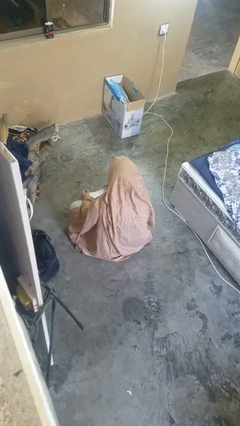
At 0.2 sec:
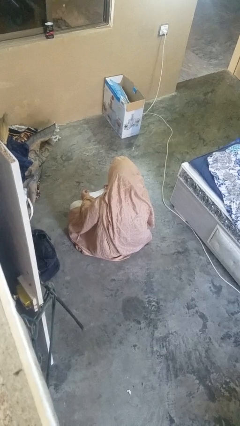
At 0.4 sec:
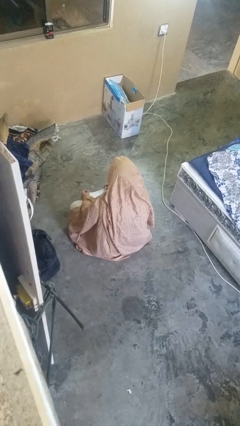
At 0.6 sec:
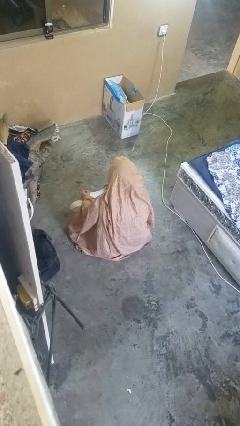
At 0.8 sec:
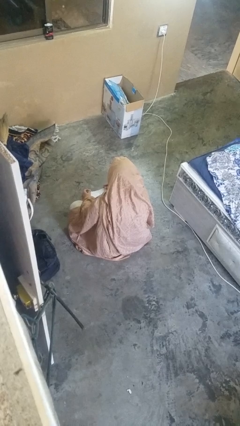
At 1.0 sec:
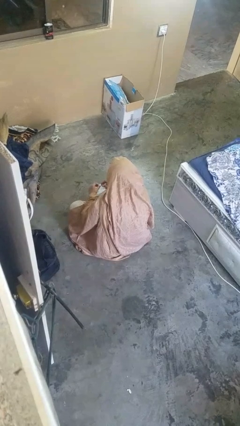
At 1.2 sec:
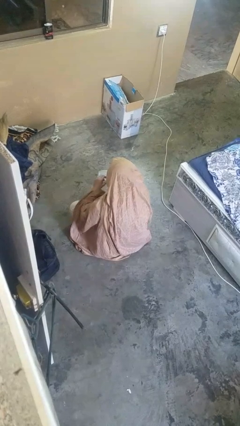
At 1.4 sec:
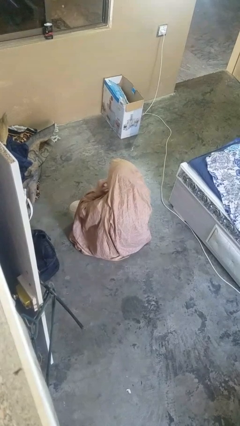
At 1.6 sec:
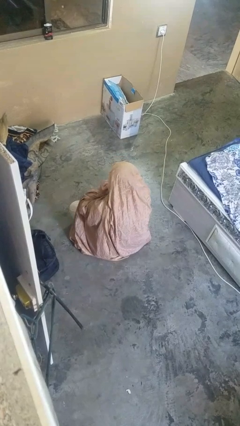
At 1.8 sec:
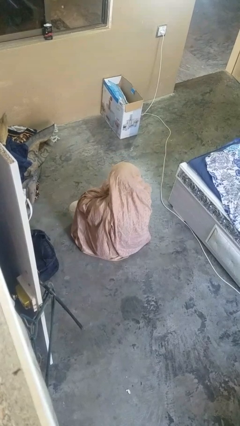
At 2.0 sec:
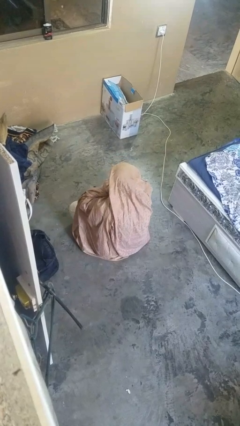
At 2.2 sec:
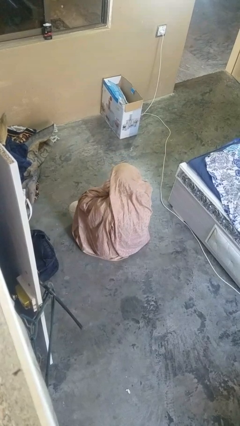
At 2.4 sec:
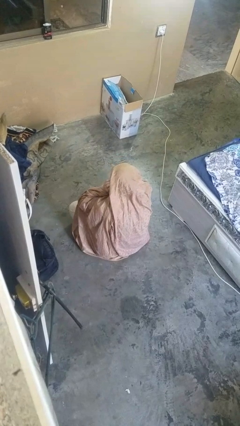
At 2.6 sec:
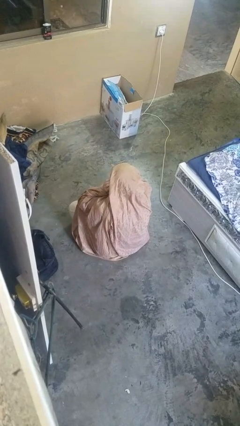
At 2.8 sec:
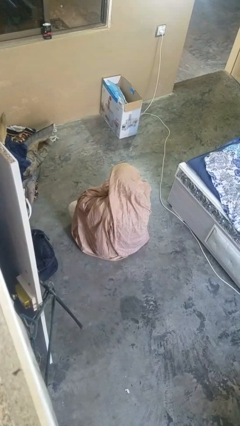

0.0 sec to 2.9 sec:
person puts on facemask

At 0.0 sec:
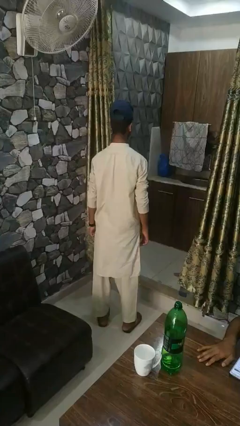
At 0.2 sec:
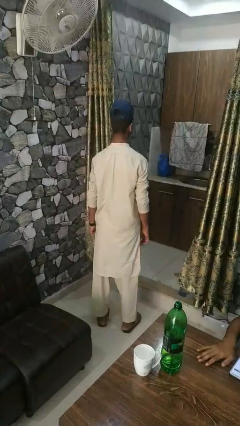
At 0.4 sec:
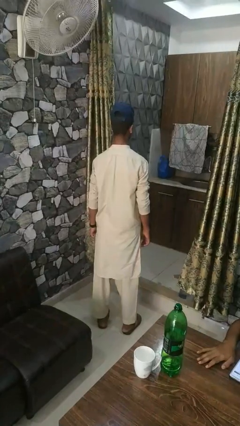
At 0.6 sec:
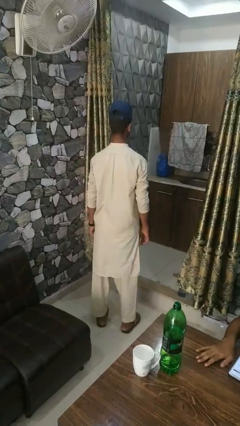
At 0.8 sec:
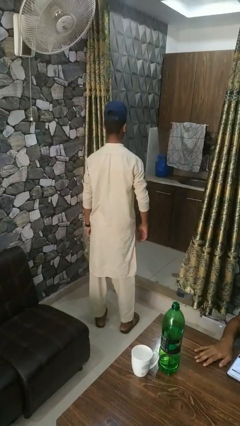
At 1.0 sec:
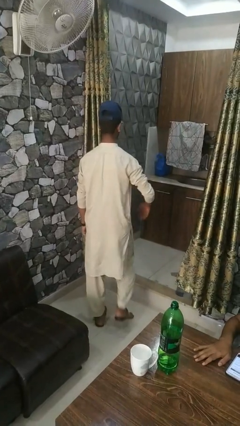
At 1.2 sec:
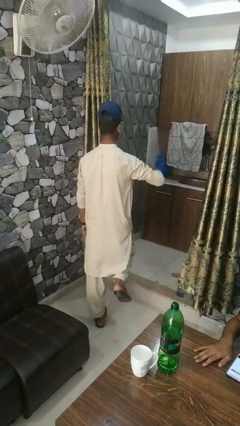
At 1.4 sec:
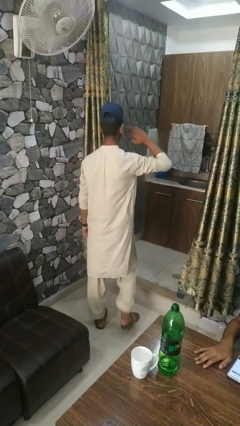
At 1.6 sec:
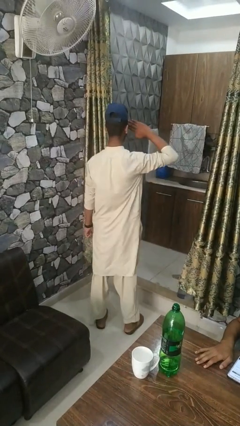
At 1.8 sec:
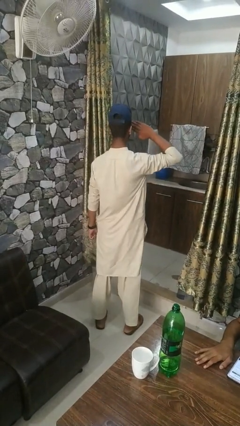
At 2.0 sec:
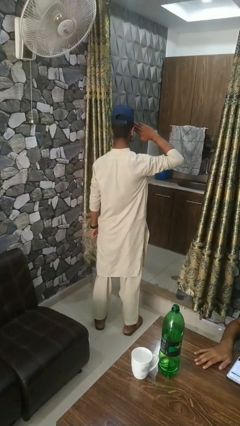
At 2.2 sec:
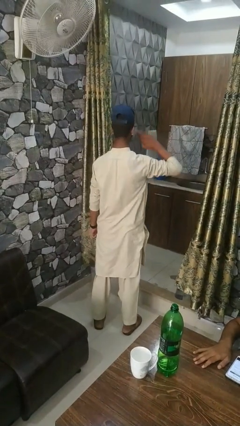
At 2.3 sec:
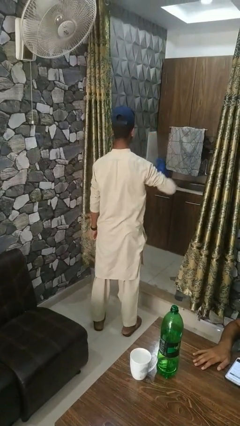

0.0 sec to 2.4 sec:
person salutes

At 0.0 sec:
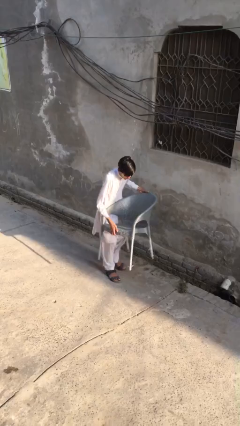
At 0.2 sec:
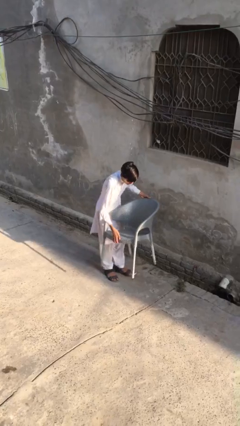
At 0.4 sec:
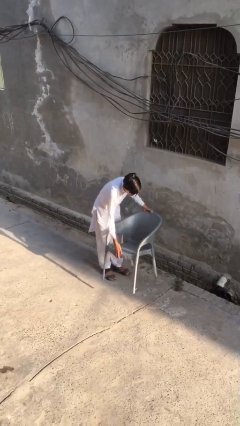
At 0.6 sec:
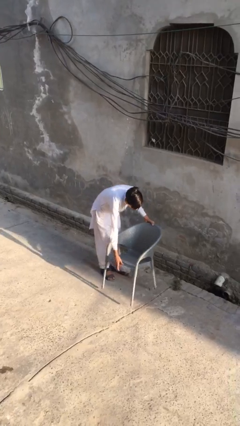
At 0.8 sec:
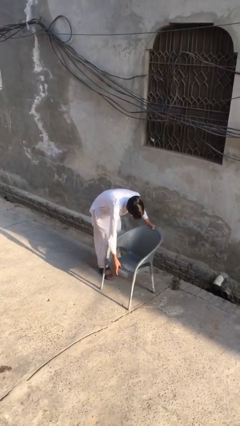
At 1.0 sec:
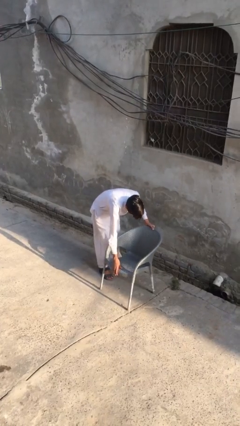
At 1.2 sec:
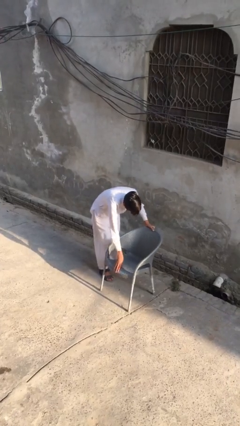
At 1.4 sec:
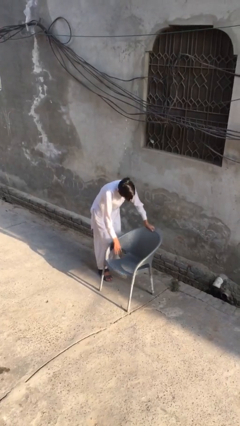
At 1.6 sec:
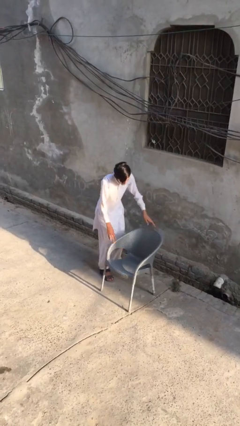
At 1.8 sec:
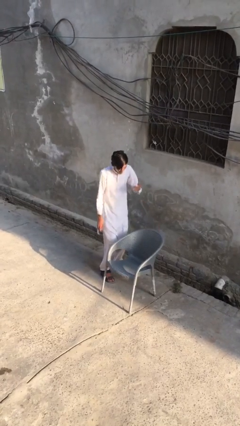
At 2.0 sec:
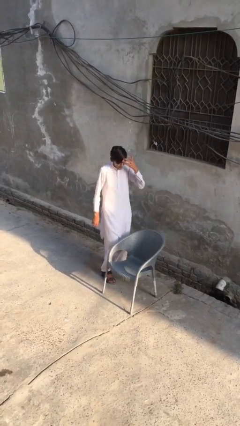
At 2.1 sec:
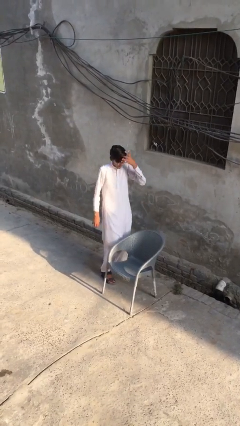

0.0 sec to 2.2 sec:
person puts down object on floor

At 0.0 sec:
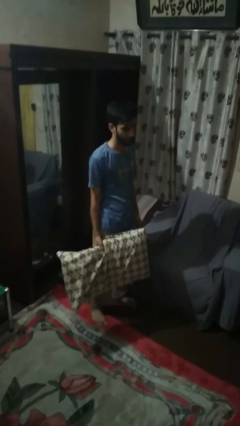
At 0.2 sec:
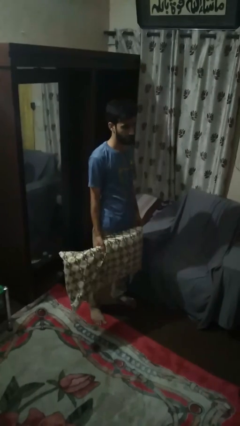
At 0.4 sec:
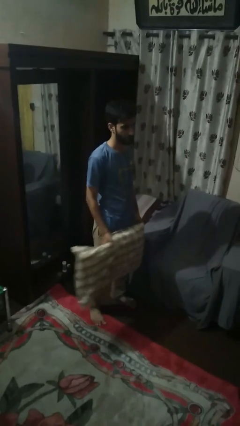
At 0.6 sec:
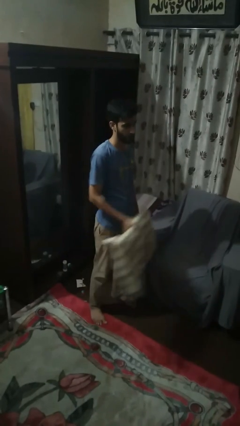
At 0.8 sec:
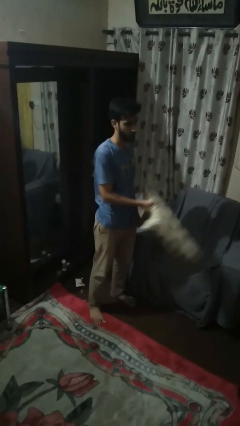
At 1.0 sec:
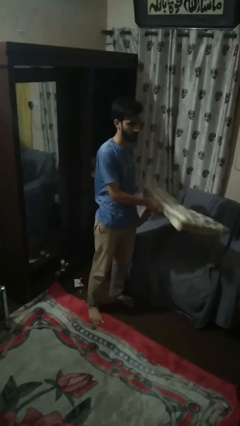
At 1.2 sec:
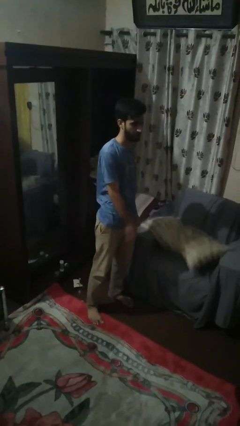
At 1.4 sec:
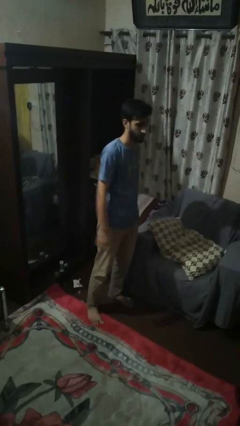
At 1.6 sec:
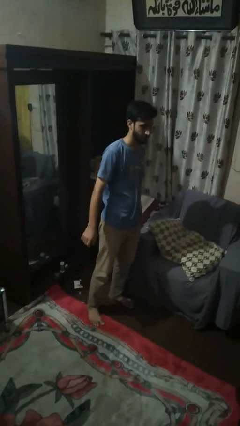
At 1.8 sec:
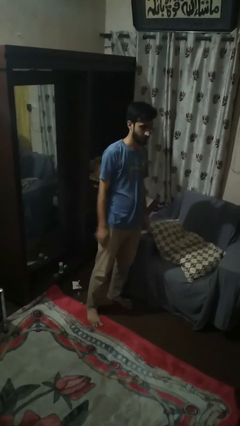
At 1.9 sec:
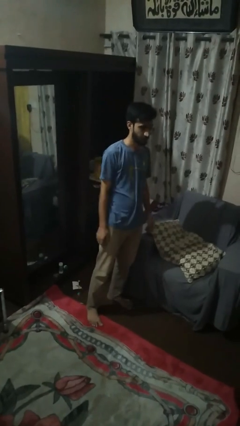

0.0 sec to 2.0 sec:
person puts down object on couch

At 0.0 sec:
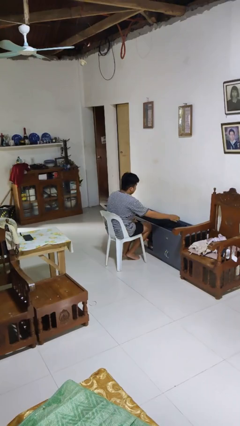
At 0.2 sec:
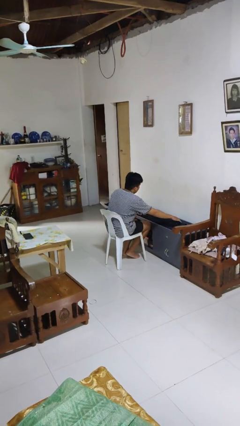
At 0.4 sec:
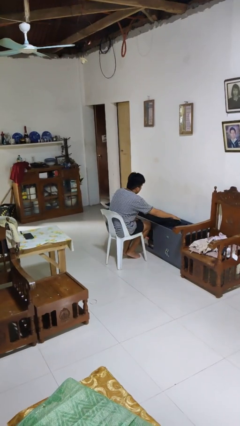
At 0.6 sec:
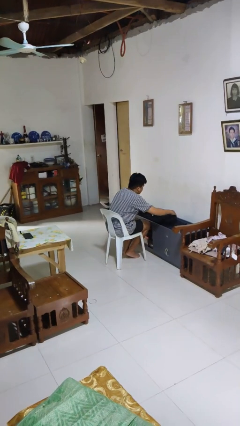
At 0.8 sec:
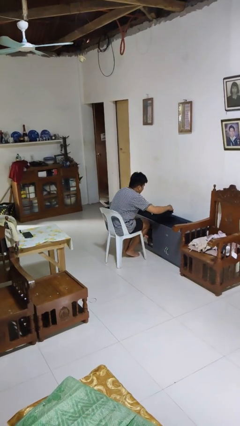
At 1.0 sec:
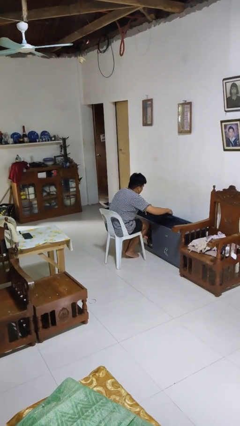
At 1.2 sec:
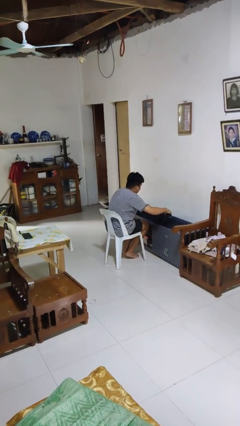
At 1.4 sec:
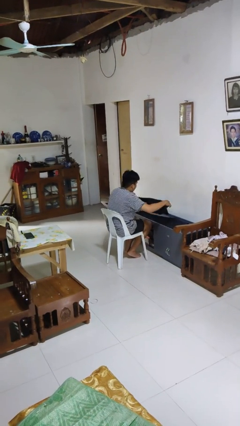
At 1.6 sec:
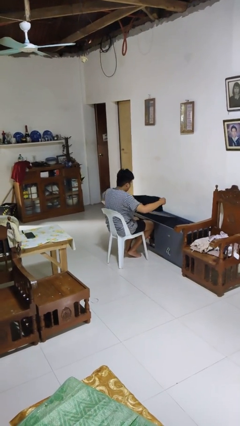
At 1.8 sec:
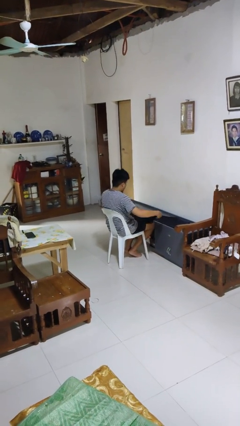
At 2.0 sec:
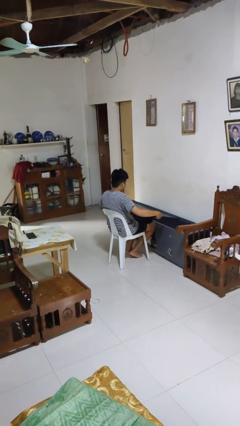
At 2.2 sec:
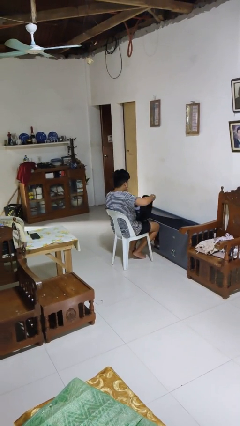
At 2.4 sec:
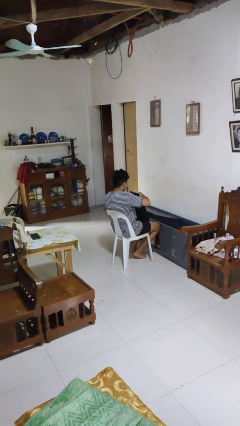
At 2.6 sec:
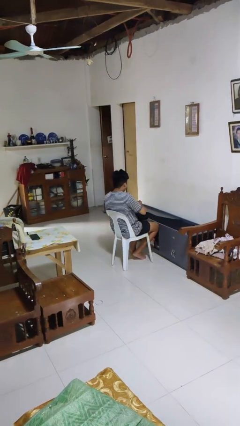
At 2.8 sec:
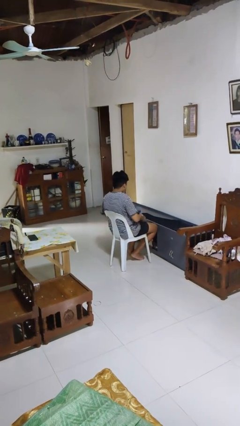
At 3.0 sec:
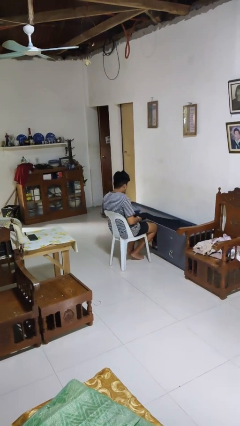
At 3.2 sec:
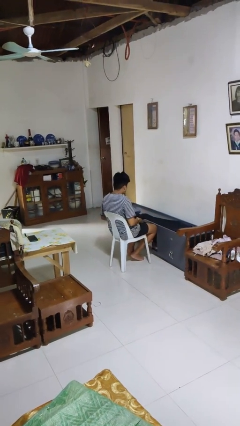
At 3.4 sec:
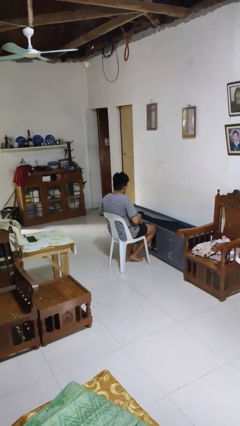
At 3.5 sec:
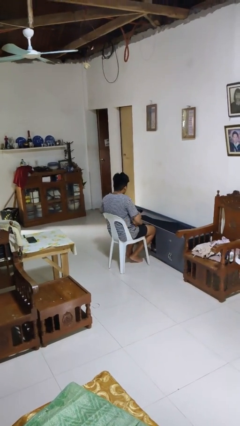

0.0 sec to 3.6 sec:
person folds pants

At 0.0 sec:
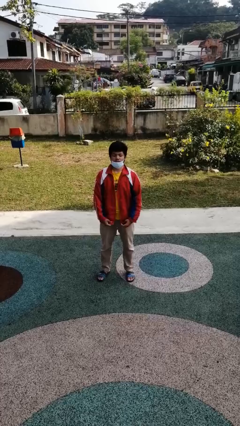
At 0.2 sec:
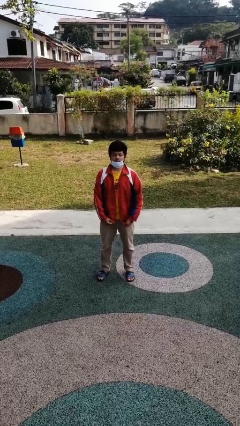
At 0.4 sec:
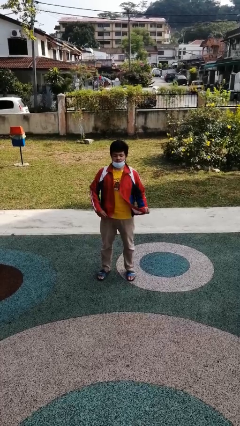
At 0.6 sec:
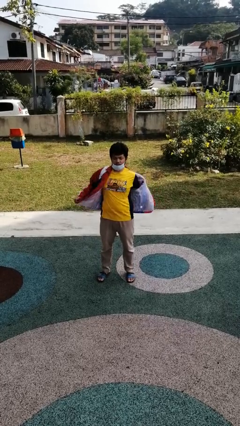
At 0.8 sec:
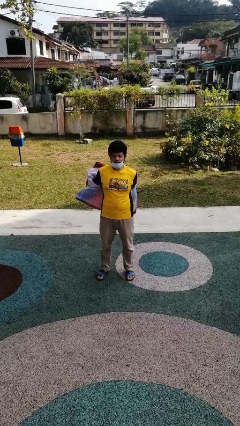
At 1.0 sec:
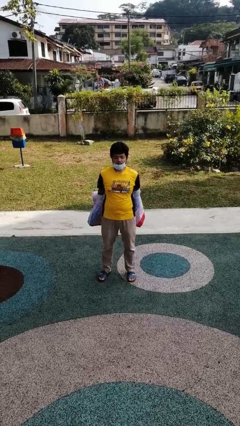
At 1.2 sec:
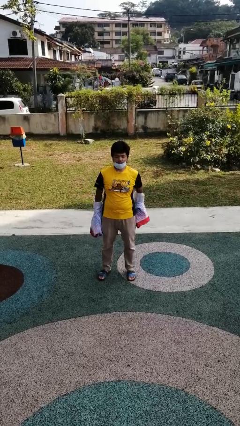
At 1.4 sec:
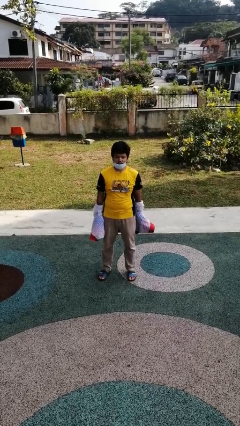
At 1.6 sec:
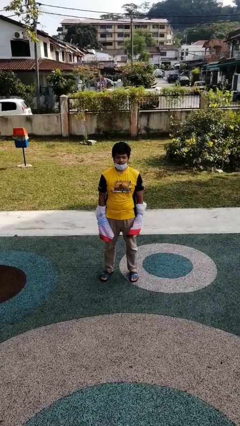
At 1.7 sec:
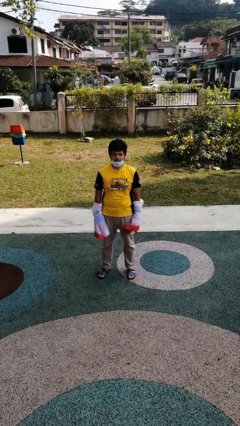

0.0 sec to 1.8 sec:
person takes off jacket

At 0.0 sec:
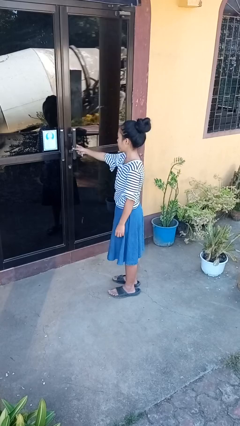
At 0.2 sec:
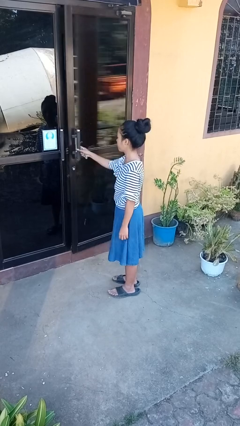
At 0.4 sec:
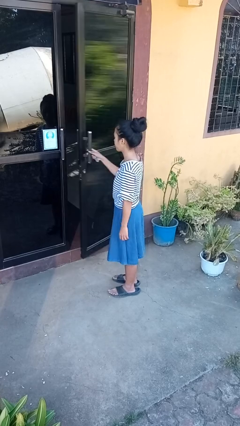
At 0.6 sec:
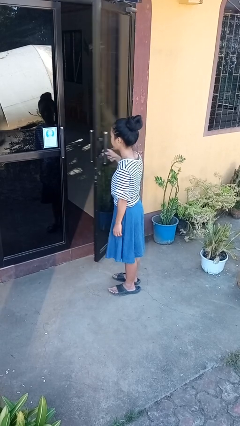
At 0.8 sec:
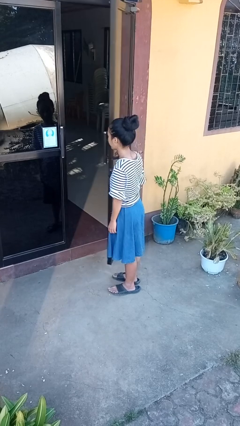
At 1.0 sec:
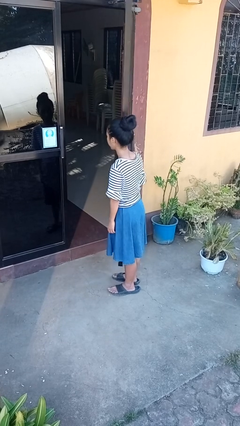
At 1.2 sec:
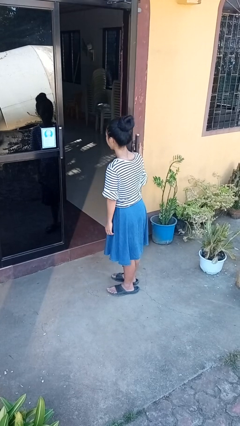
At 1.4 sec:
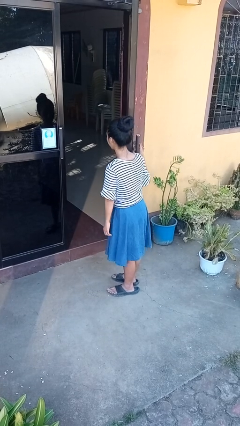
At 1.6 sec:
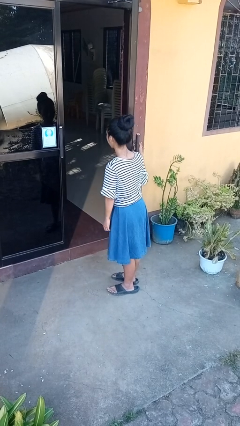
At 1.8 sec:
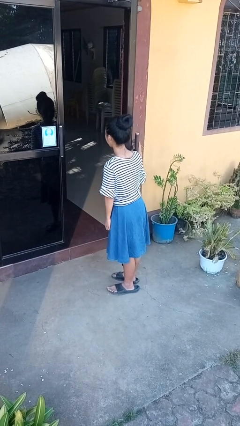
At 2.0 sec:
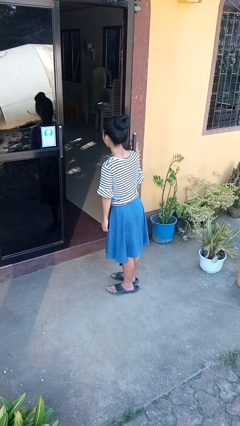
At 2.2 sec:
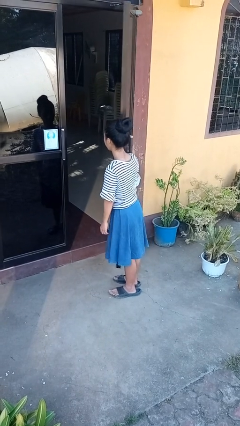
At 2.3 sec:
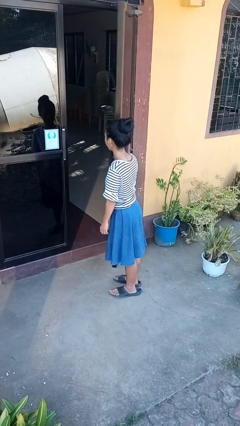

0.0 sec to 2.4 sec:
person opens facility door
